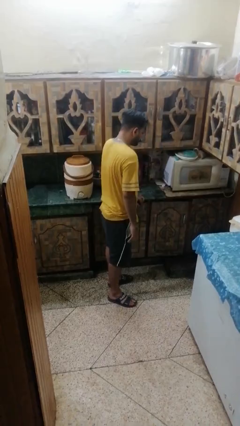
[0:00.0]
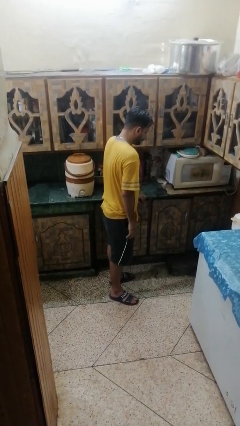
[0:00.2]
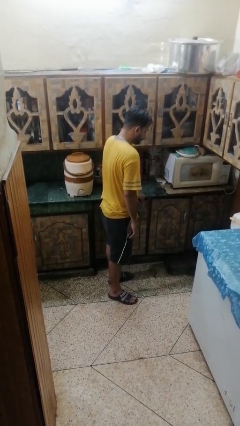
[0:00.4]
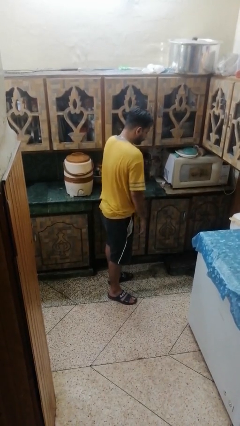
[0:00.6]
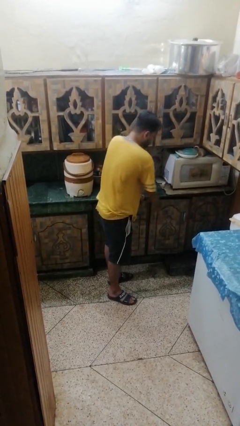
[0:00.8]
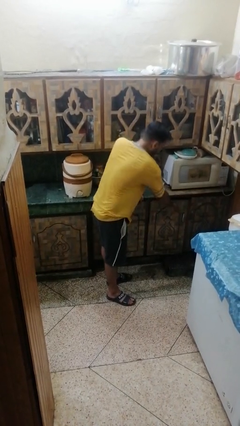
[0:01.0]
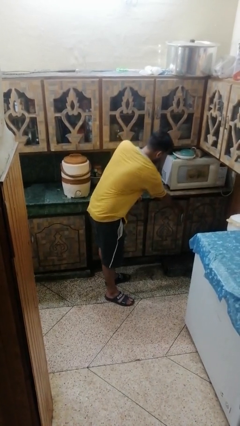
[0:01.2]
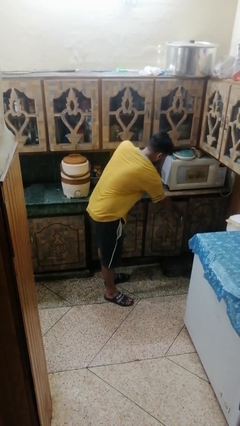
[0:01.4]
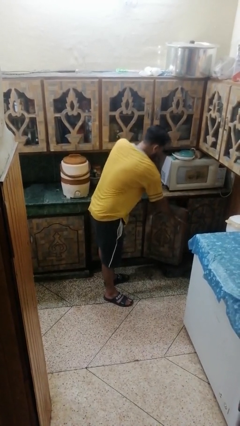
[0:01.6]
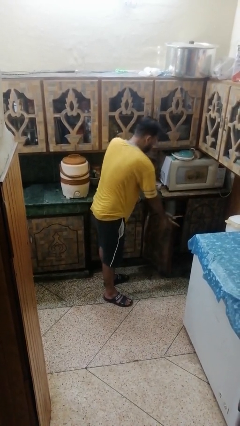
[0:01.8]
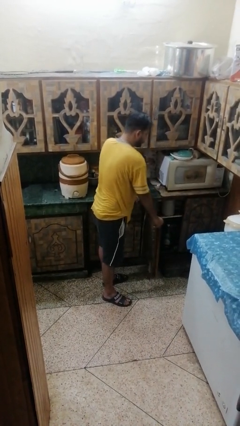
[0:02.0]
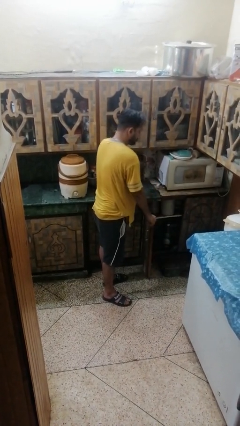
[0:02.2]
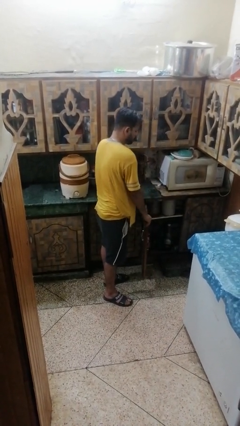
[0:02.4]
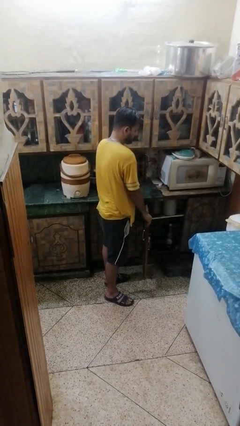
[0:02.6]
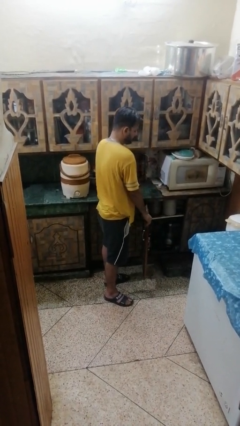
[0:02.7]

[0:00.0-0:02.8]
person closes cabinet

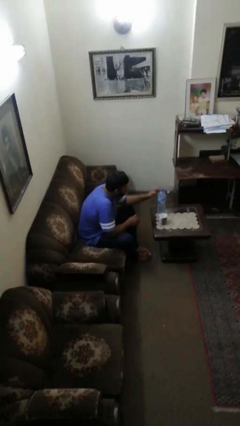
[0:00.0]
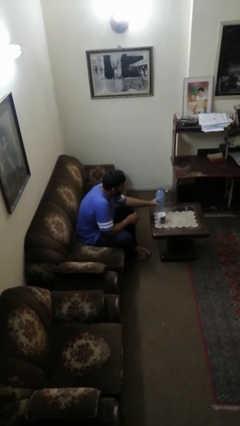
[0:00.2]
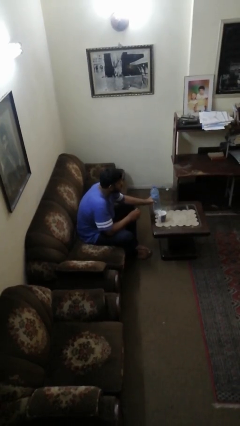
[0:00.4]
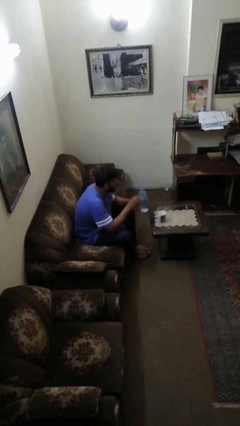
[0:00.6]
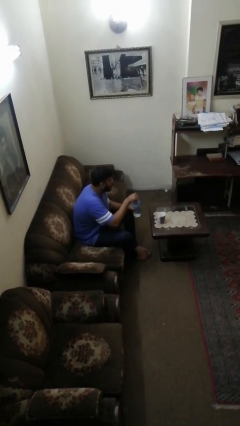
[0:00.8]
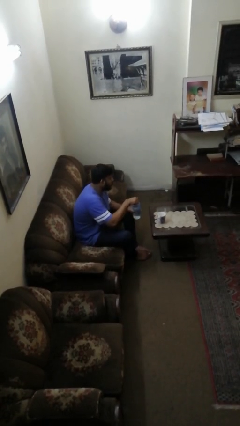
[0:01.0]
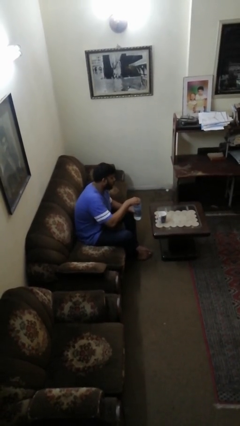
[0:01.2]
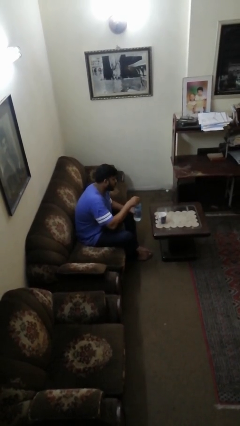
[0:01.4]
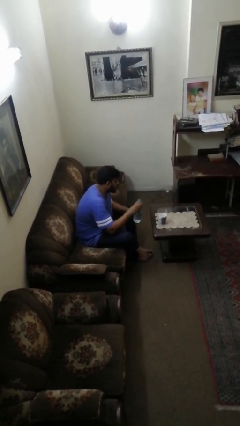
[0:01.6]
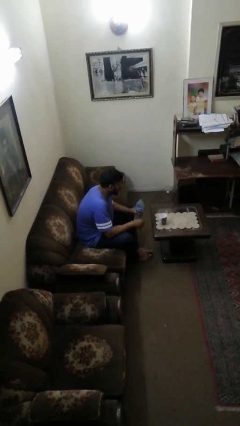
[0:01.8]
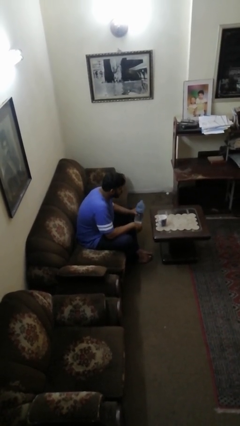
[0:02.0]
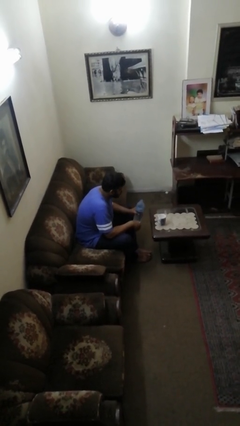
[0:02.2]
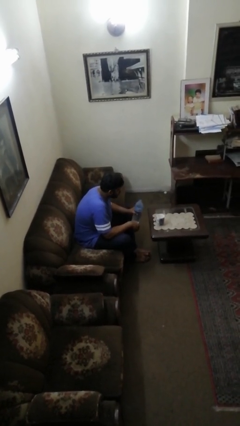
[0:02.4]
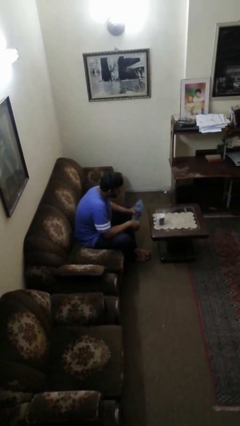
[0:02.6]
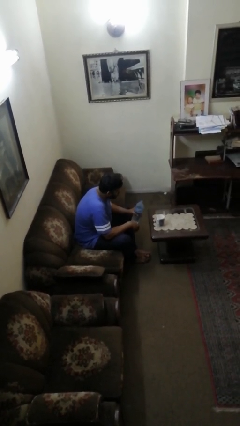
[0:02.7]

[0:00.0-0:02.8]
person unscrews lid from bottle

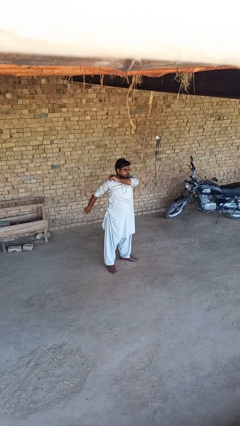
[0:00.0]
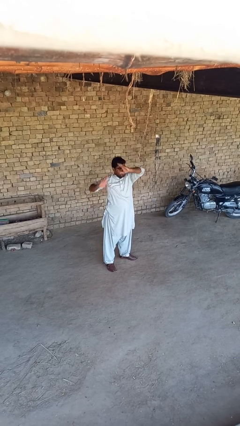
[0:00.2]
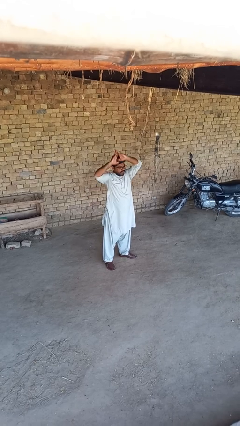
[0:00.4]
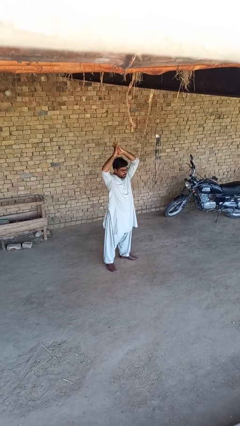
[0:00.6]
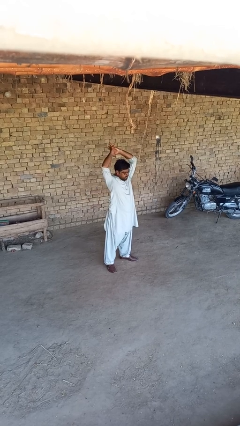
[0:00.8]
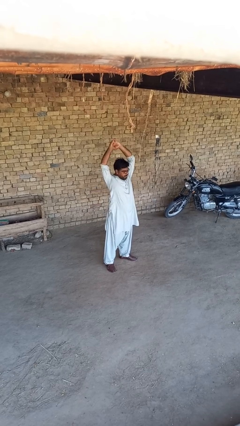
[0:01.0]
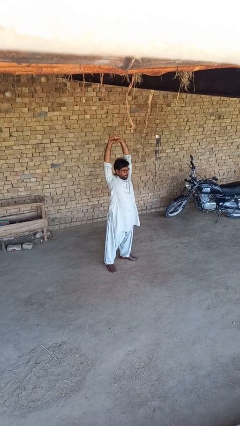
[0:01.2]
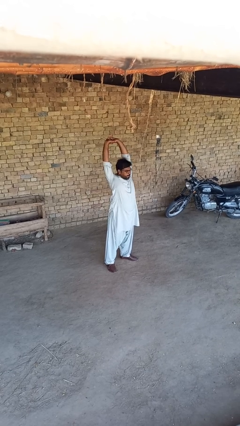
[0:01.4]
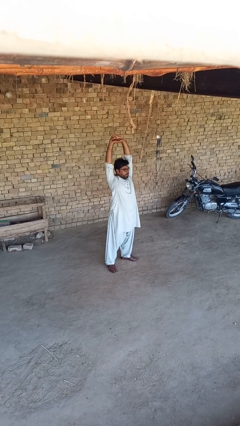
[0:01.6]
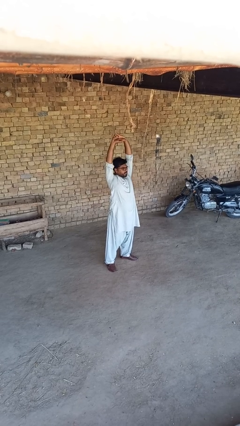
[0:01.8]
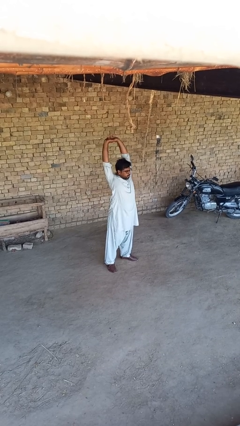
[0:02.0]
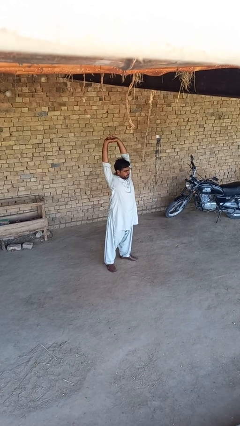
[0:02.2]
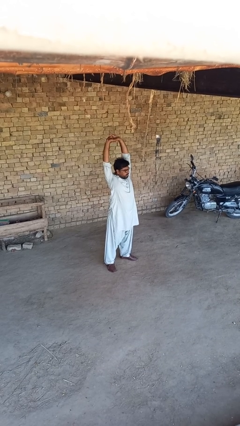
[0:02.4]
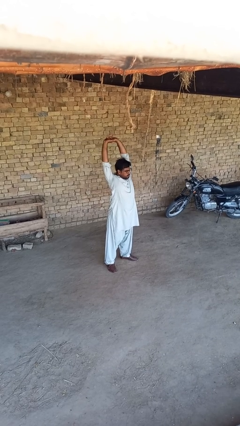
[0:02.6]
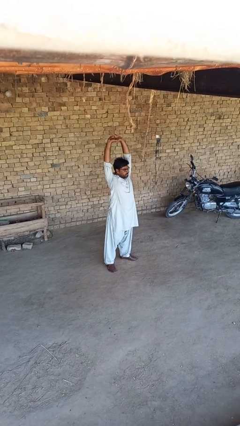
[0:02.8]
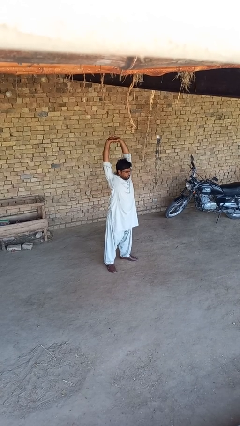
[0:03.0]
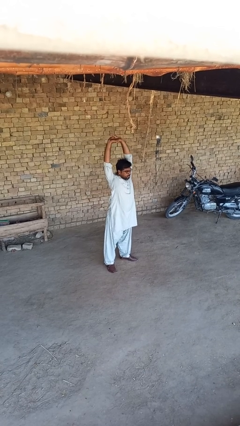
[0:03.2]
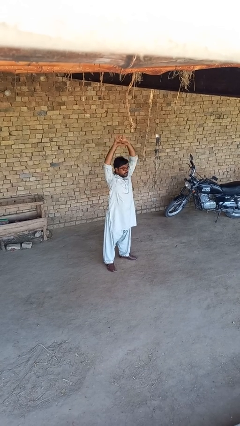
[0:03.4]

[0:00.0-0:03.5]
person stretches arms over head

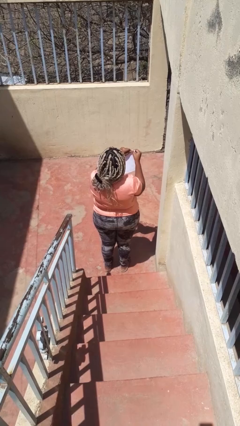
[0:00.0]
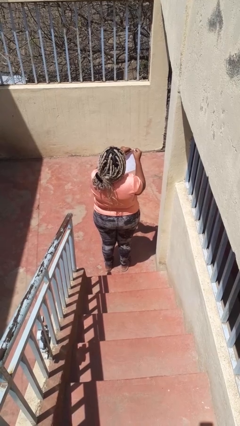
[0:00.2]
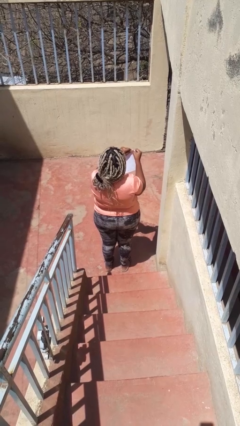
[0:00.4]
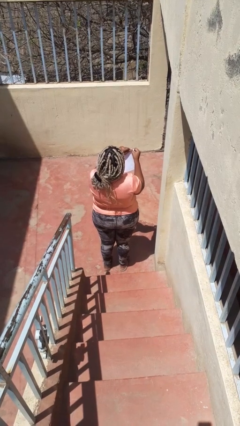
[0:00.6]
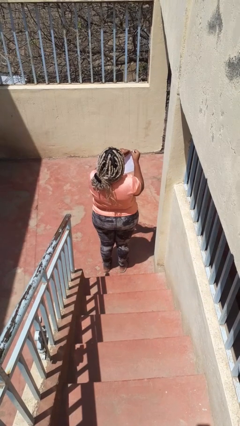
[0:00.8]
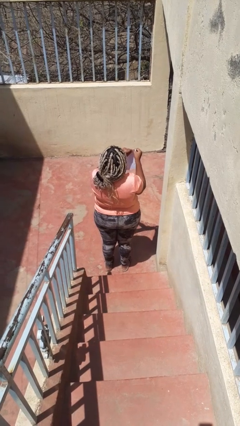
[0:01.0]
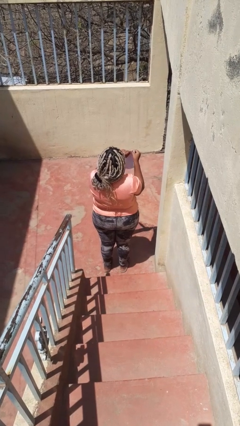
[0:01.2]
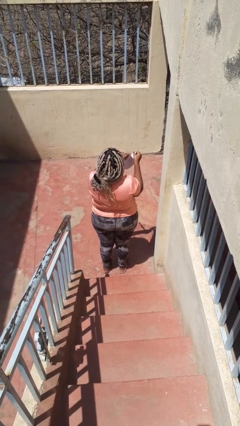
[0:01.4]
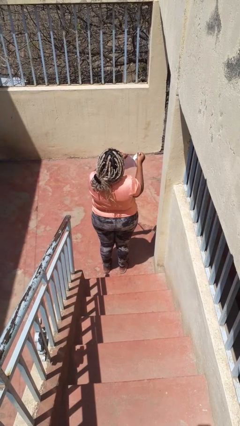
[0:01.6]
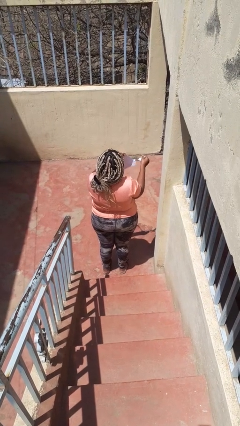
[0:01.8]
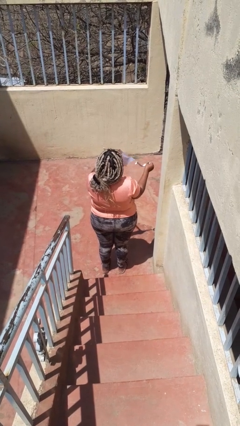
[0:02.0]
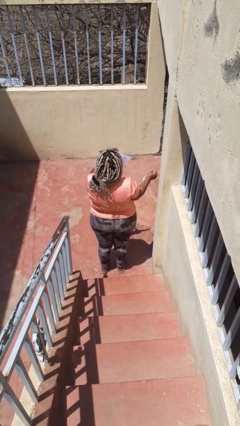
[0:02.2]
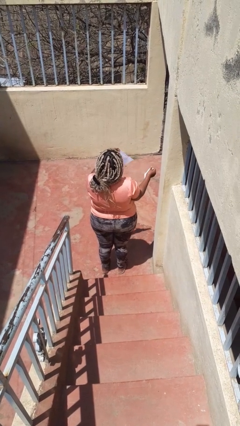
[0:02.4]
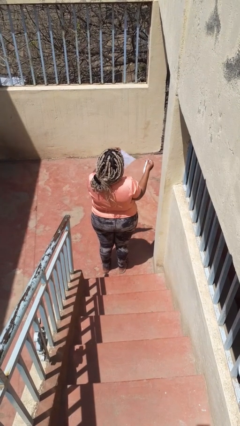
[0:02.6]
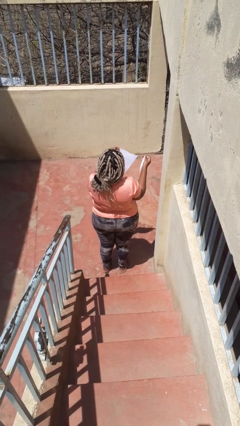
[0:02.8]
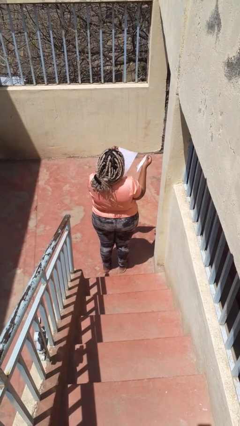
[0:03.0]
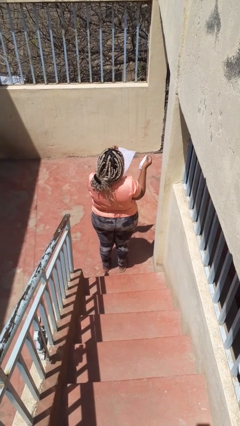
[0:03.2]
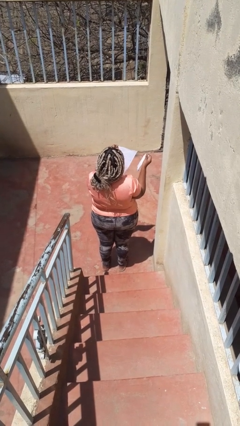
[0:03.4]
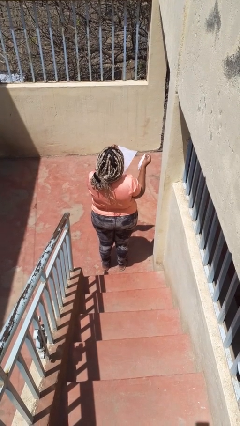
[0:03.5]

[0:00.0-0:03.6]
person tears paper

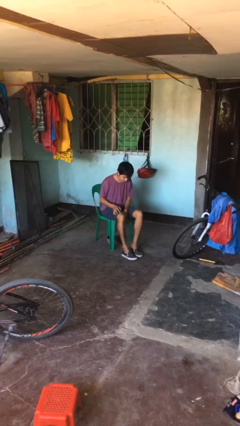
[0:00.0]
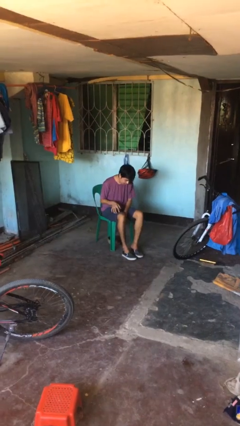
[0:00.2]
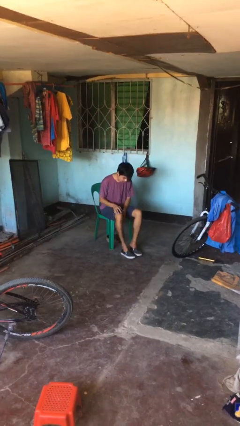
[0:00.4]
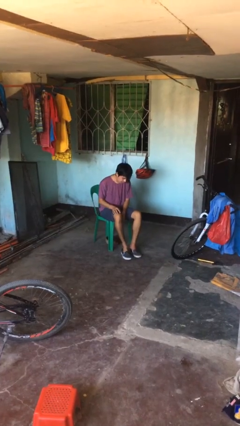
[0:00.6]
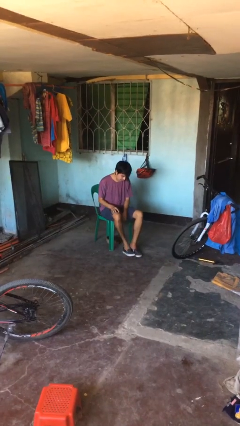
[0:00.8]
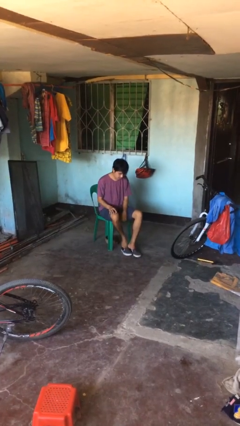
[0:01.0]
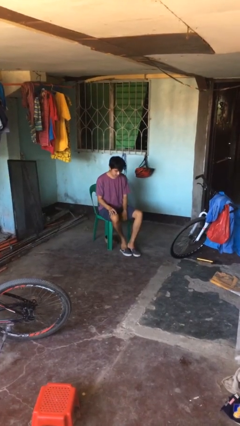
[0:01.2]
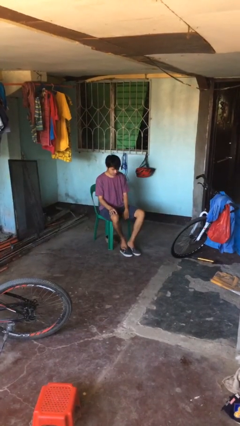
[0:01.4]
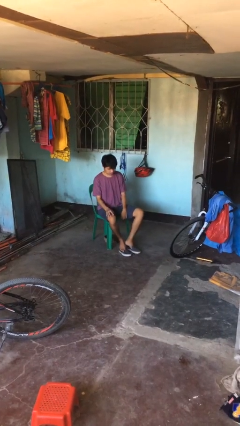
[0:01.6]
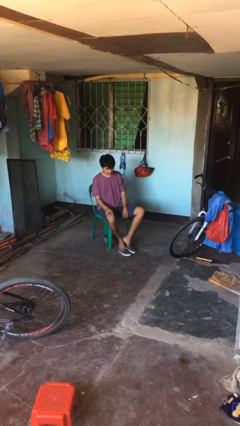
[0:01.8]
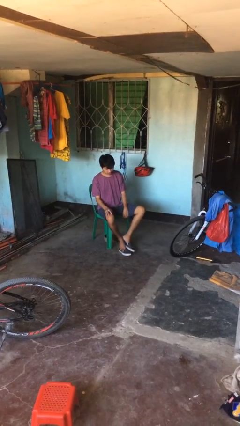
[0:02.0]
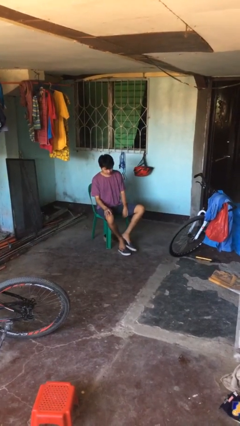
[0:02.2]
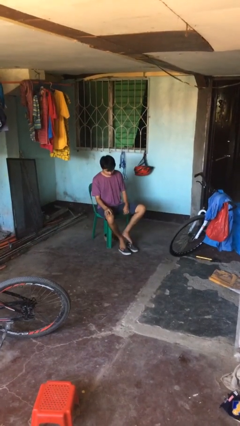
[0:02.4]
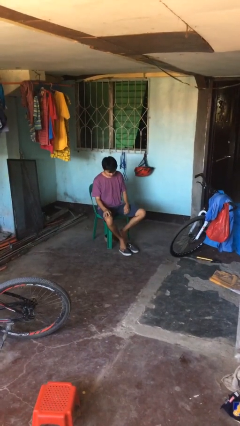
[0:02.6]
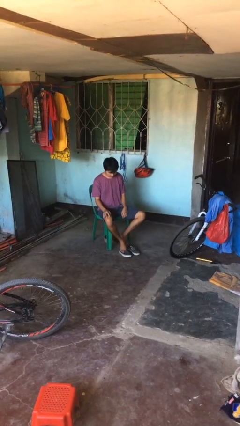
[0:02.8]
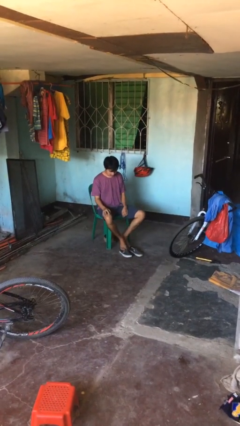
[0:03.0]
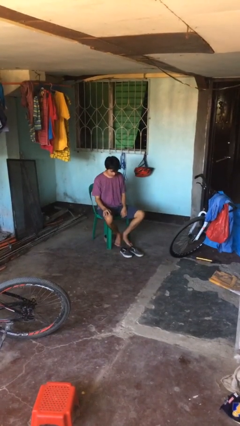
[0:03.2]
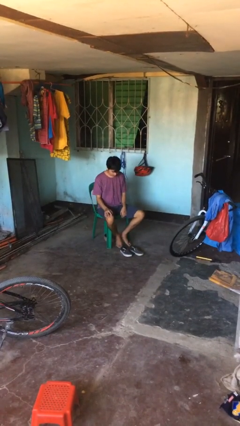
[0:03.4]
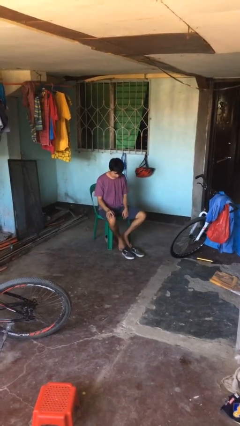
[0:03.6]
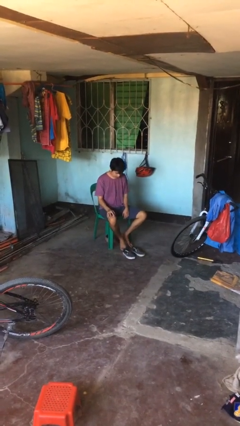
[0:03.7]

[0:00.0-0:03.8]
person takes off shoes

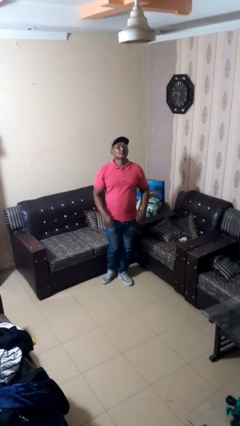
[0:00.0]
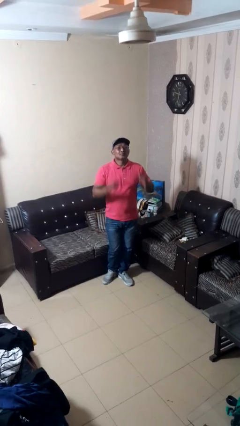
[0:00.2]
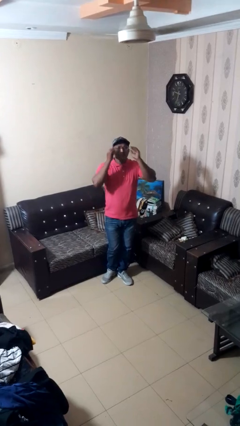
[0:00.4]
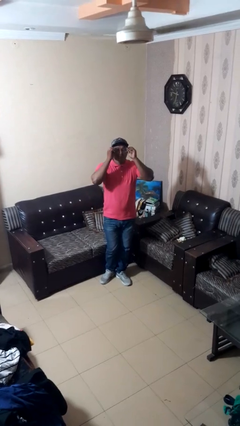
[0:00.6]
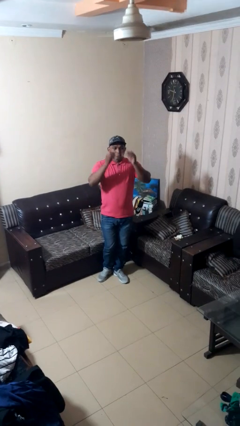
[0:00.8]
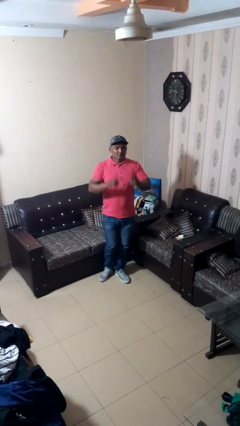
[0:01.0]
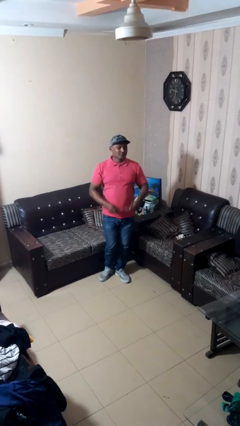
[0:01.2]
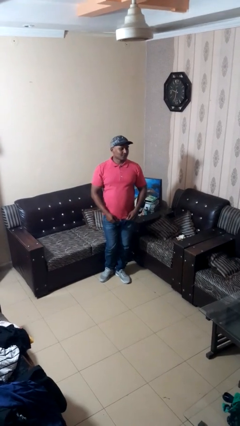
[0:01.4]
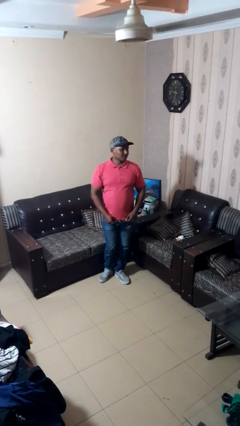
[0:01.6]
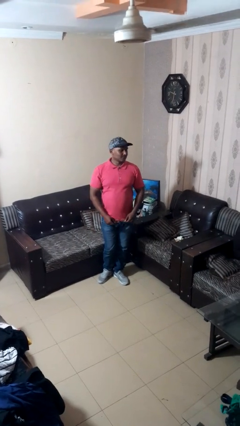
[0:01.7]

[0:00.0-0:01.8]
person takes off glasses
